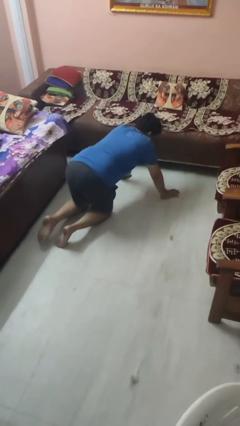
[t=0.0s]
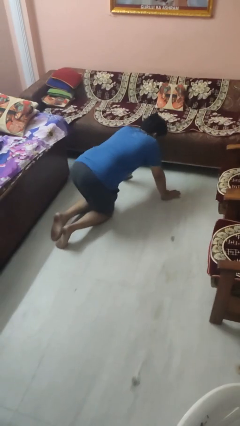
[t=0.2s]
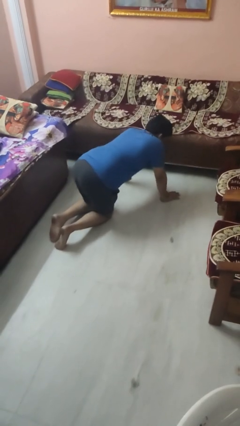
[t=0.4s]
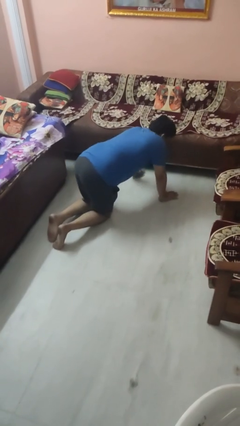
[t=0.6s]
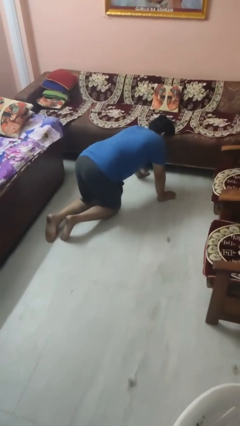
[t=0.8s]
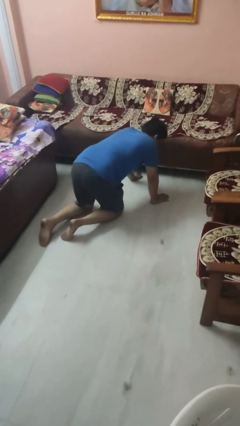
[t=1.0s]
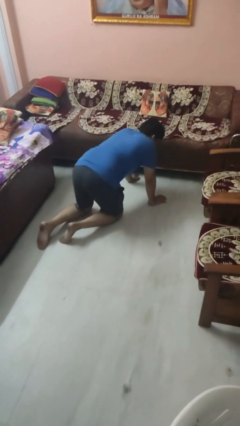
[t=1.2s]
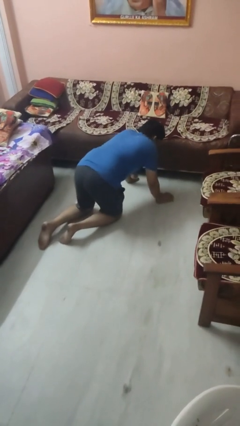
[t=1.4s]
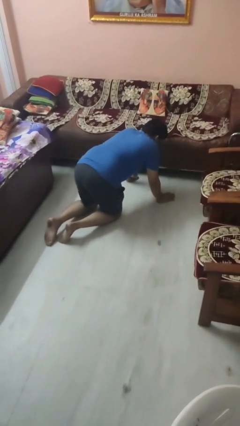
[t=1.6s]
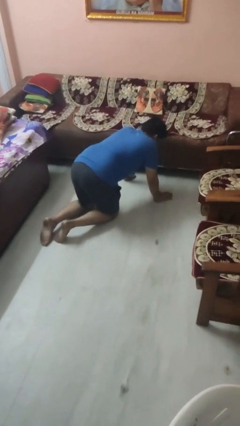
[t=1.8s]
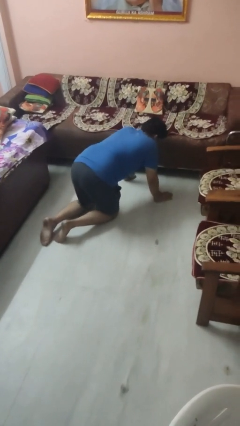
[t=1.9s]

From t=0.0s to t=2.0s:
person crawls

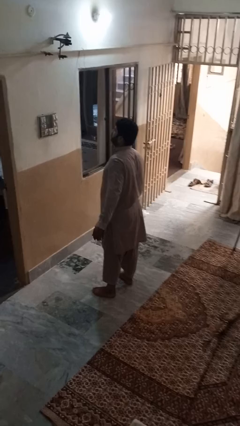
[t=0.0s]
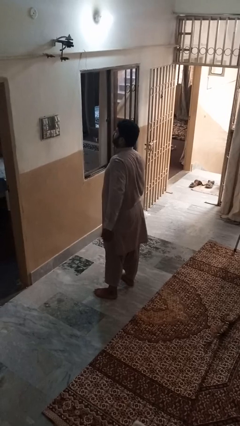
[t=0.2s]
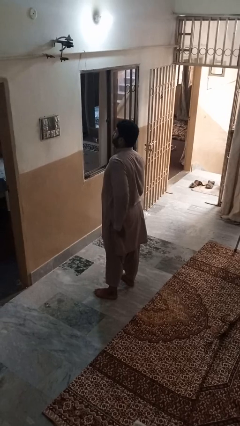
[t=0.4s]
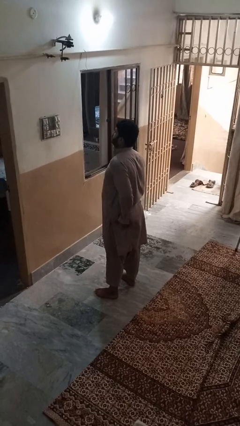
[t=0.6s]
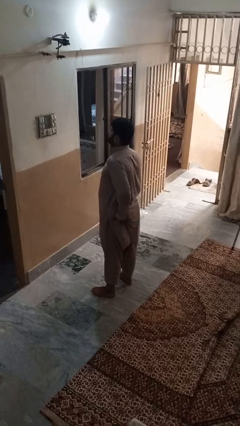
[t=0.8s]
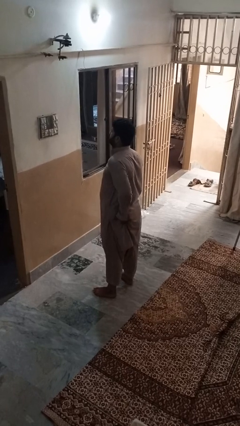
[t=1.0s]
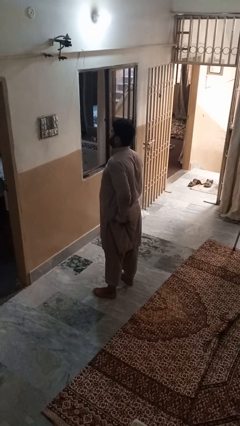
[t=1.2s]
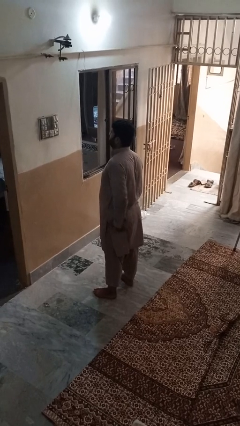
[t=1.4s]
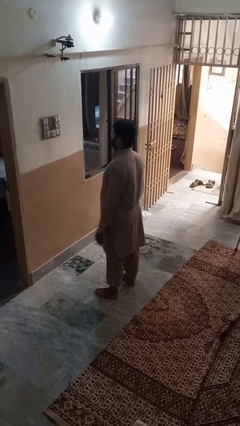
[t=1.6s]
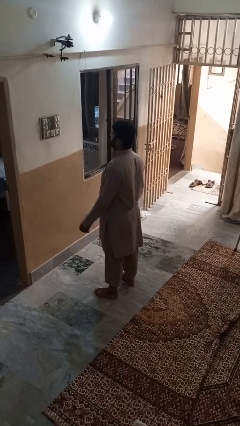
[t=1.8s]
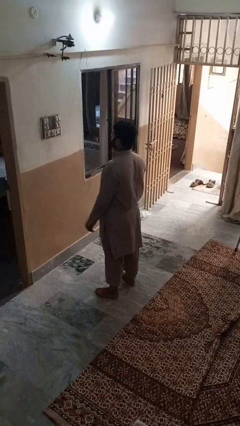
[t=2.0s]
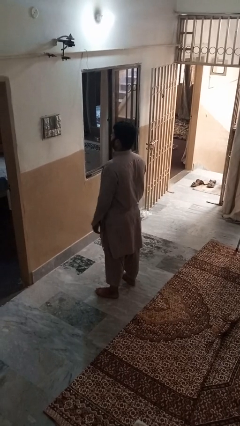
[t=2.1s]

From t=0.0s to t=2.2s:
person wiggles hips

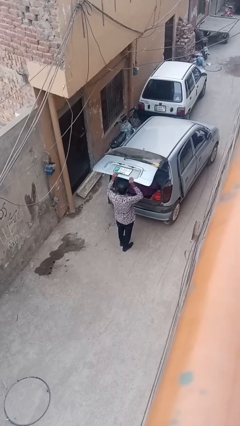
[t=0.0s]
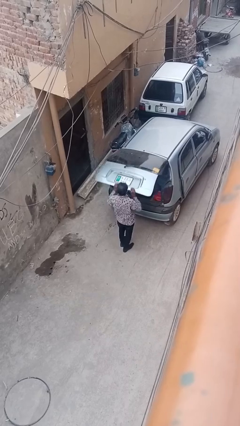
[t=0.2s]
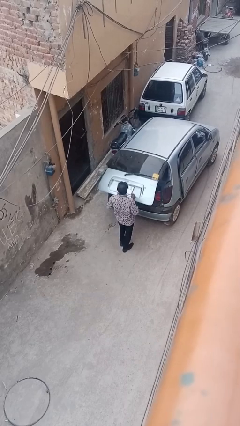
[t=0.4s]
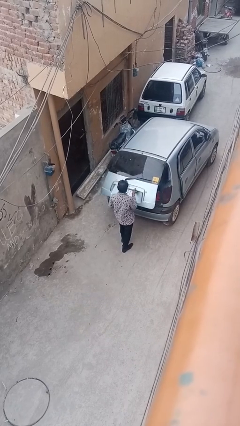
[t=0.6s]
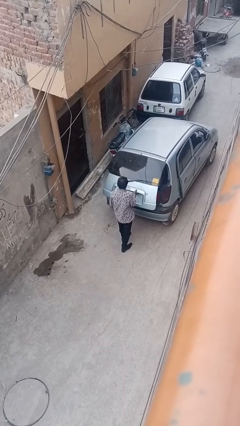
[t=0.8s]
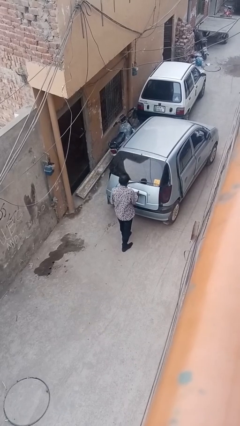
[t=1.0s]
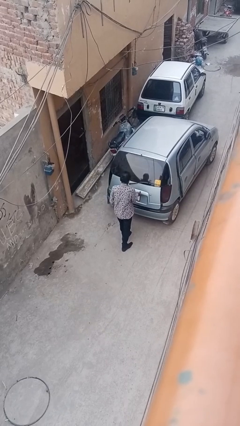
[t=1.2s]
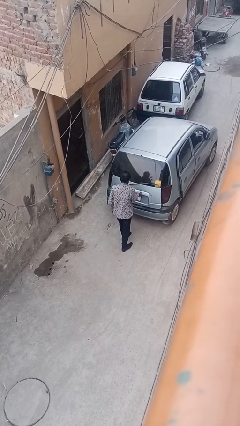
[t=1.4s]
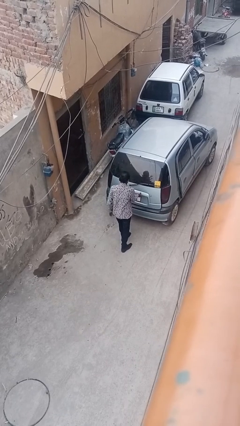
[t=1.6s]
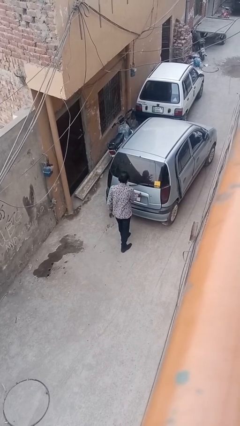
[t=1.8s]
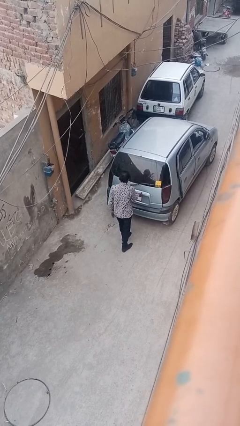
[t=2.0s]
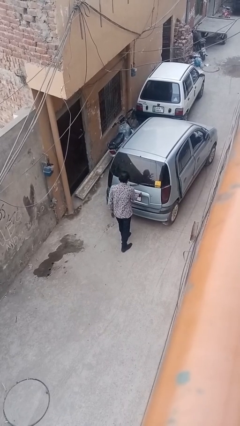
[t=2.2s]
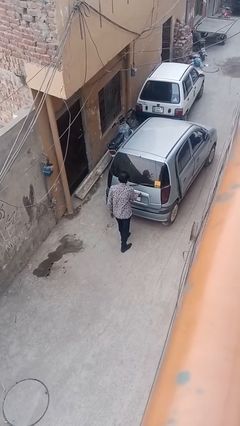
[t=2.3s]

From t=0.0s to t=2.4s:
person closes car trunk

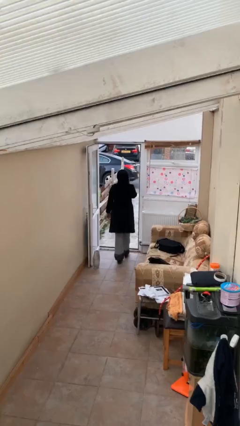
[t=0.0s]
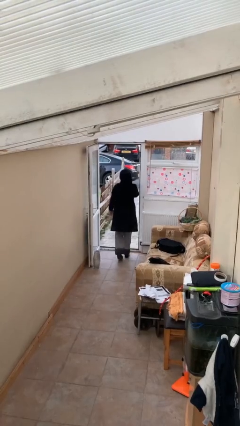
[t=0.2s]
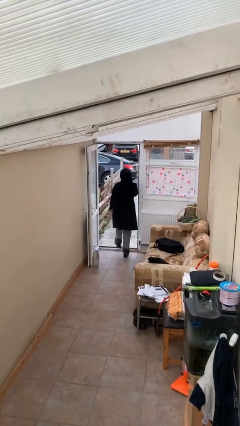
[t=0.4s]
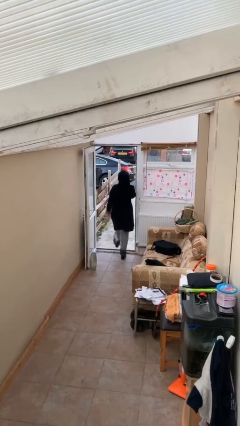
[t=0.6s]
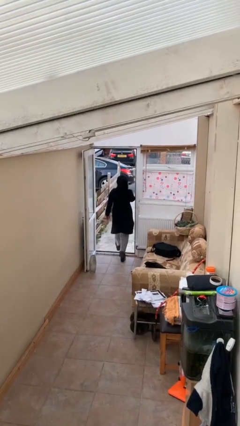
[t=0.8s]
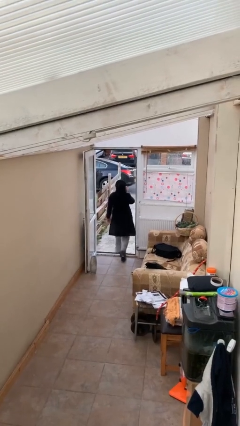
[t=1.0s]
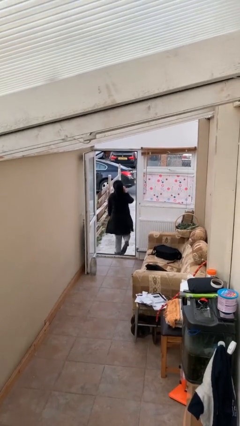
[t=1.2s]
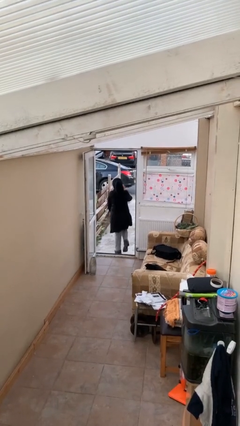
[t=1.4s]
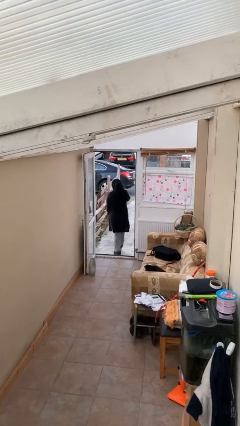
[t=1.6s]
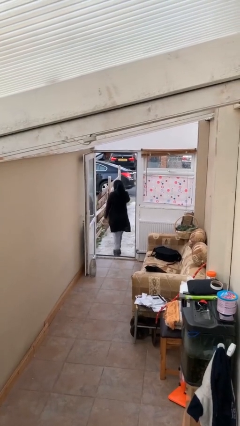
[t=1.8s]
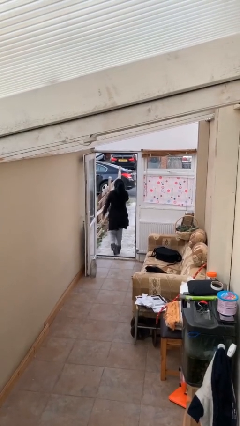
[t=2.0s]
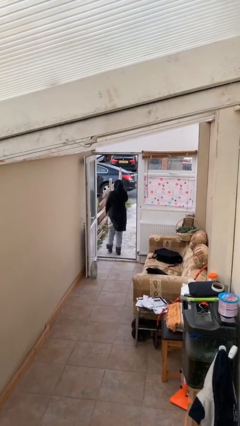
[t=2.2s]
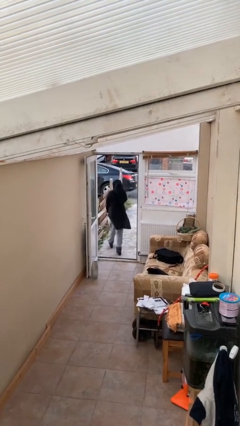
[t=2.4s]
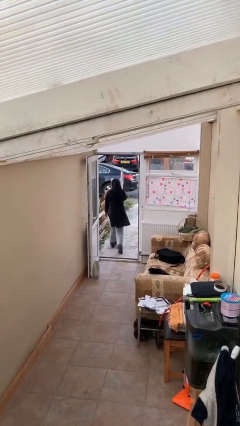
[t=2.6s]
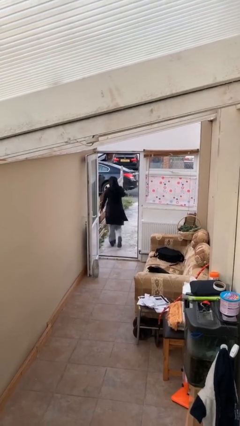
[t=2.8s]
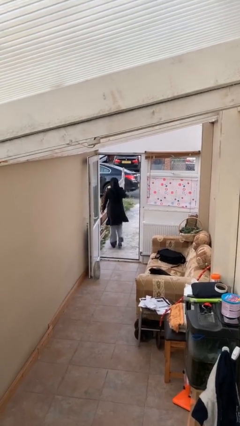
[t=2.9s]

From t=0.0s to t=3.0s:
person exits scene through structure

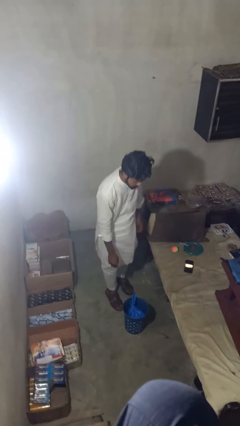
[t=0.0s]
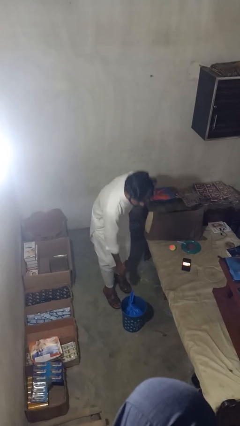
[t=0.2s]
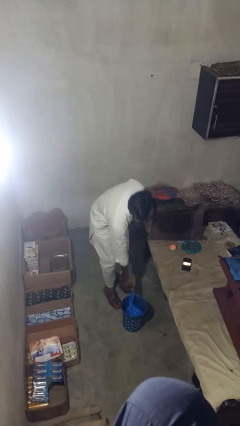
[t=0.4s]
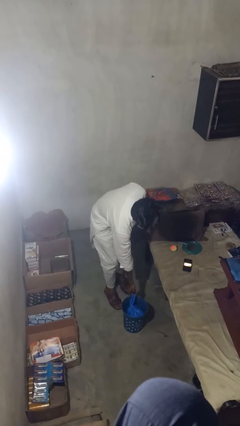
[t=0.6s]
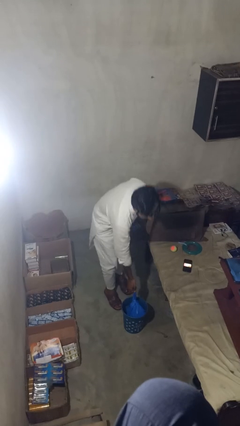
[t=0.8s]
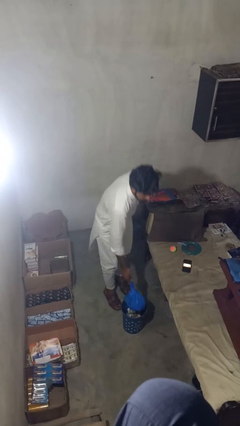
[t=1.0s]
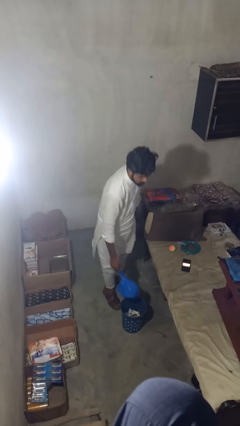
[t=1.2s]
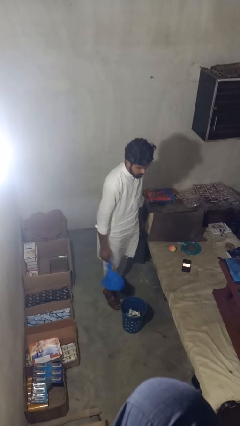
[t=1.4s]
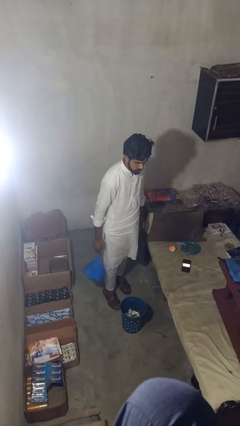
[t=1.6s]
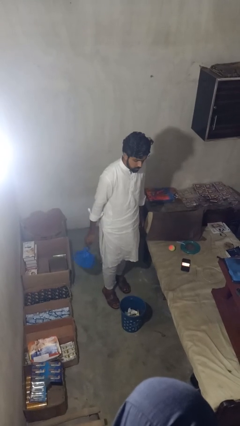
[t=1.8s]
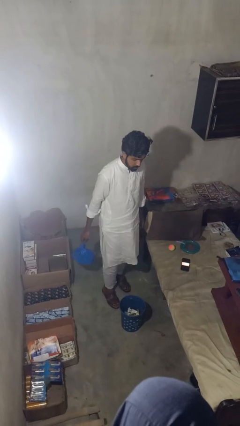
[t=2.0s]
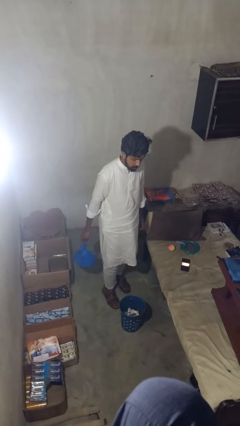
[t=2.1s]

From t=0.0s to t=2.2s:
person takes object from basket

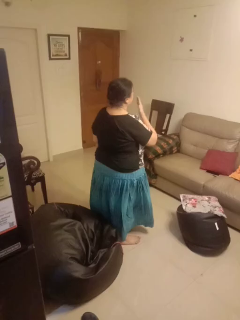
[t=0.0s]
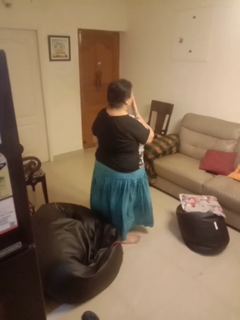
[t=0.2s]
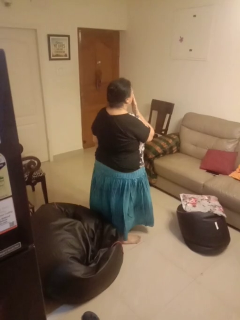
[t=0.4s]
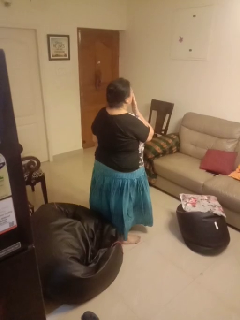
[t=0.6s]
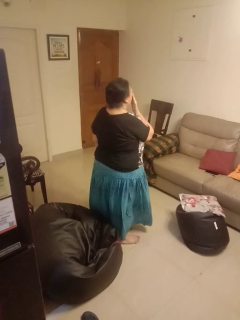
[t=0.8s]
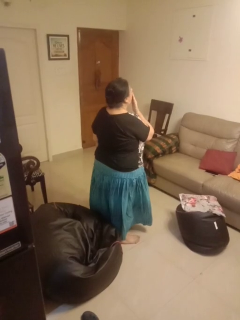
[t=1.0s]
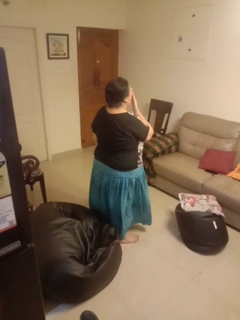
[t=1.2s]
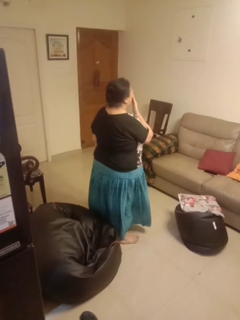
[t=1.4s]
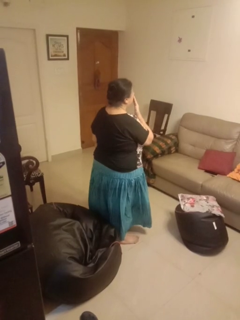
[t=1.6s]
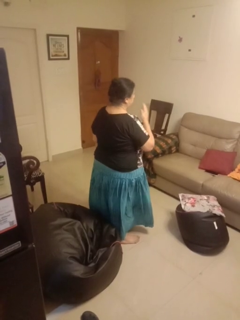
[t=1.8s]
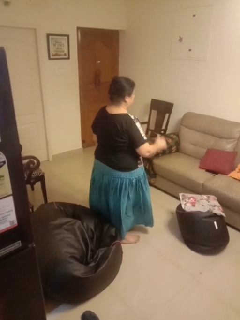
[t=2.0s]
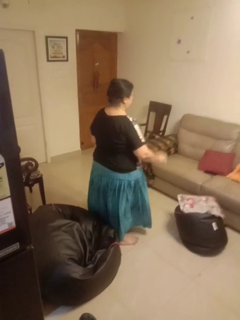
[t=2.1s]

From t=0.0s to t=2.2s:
person yawns

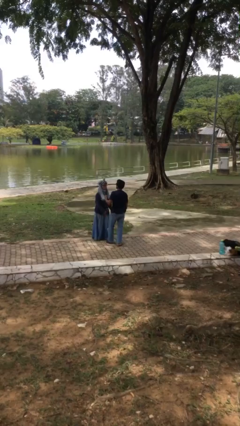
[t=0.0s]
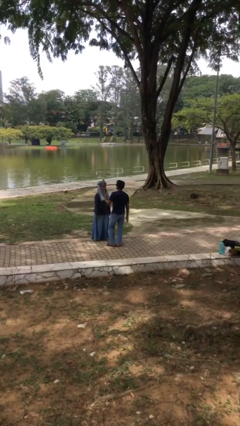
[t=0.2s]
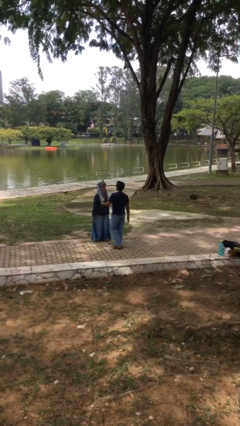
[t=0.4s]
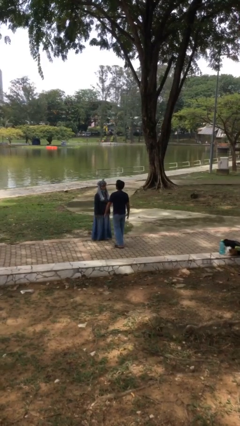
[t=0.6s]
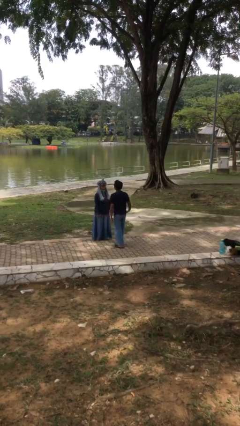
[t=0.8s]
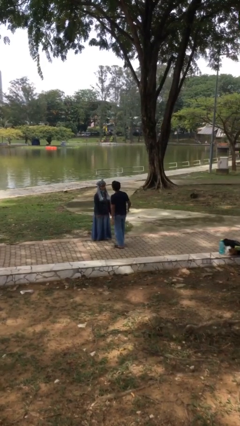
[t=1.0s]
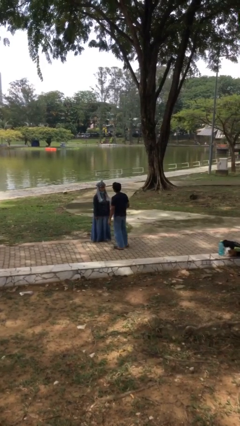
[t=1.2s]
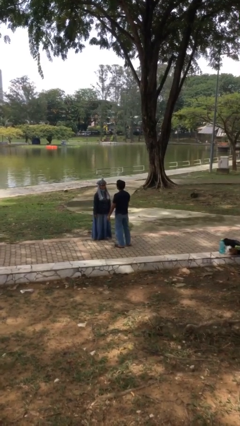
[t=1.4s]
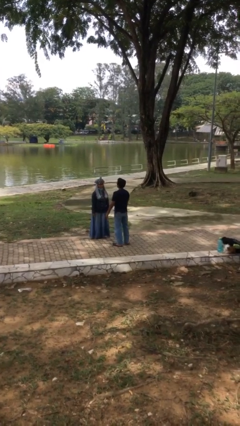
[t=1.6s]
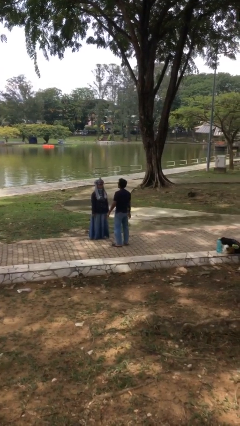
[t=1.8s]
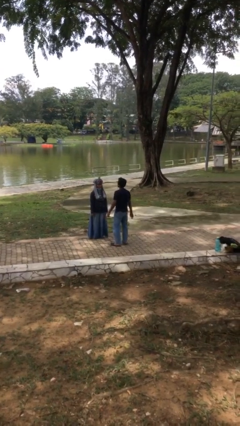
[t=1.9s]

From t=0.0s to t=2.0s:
person talks to person

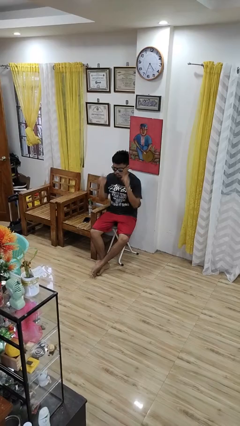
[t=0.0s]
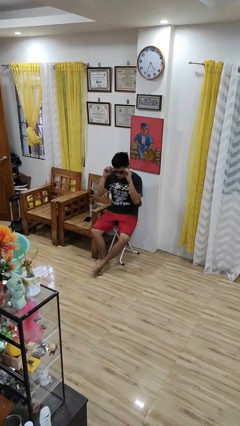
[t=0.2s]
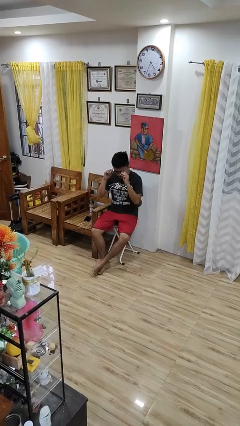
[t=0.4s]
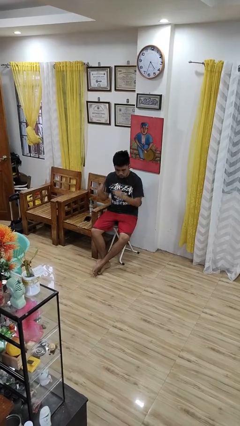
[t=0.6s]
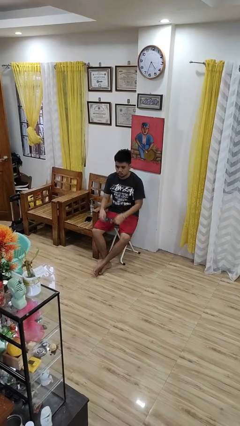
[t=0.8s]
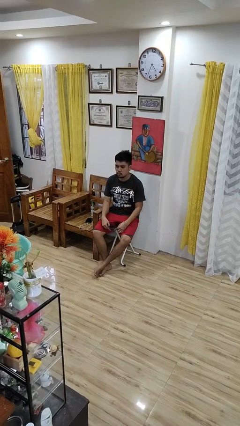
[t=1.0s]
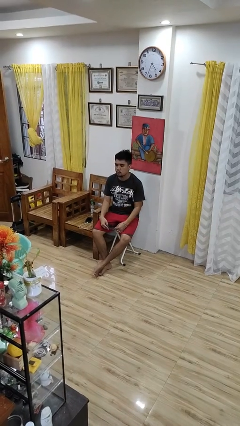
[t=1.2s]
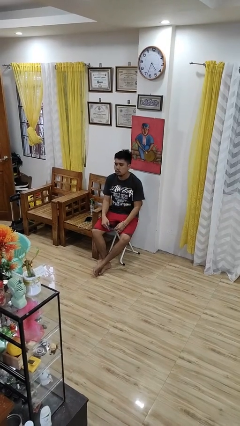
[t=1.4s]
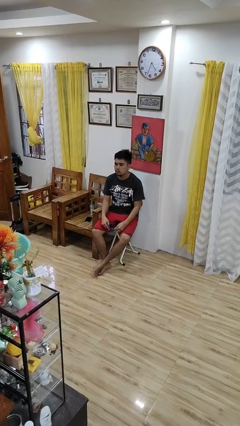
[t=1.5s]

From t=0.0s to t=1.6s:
person takes off sunglasses
